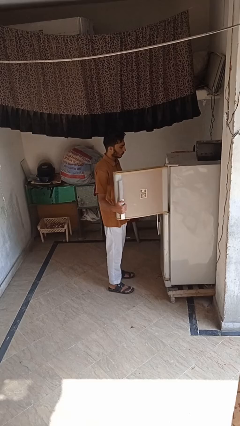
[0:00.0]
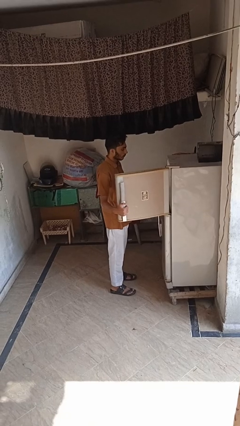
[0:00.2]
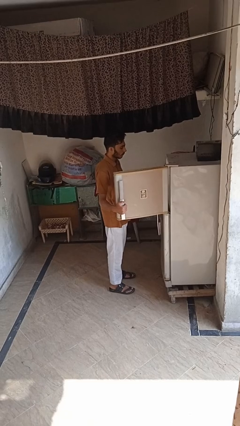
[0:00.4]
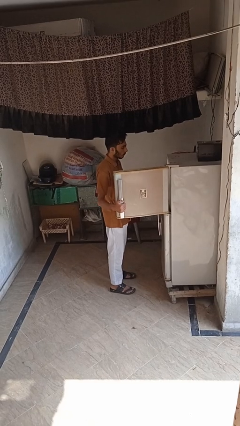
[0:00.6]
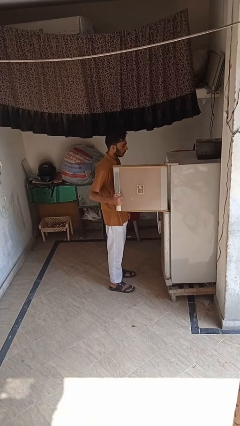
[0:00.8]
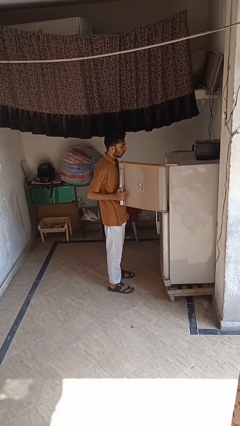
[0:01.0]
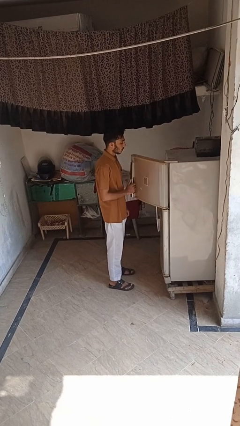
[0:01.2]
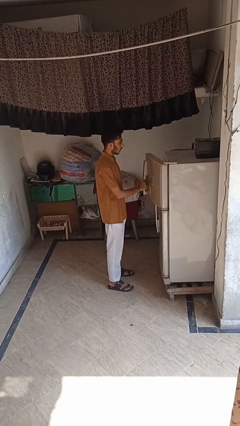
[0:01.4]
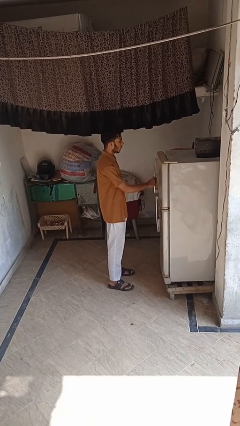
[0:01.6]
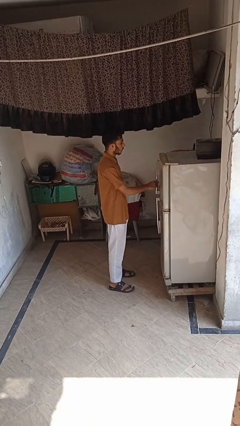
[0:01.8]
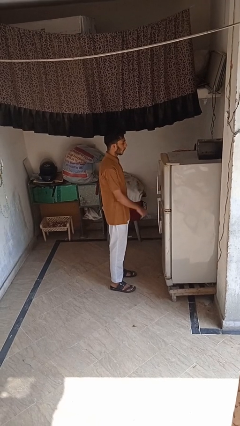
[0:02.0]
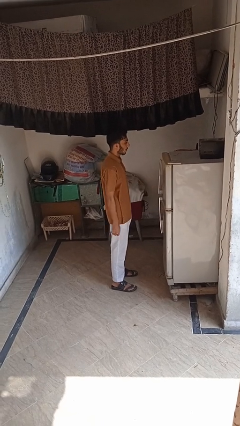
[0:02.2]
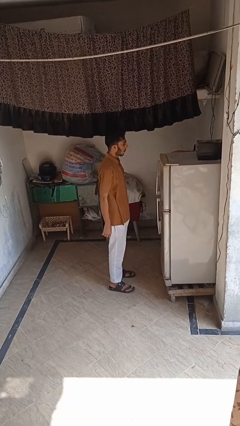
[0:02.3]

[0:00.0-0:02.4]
person closes refrigerator

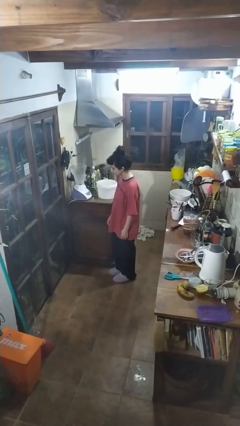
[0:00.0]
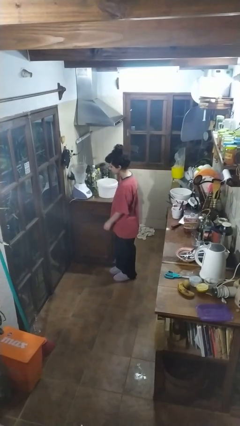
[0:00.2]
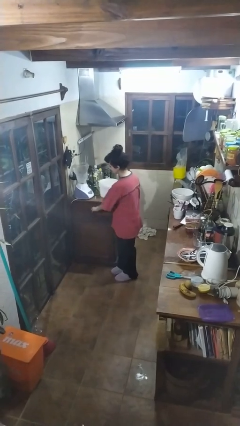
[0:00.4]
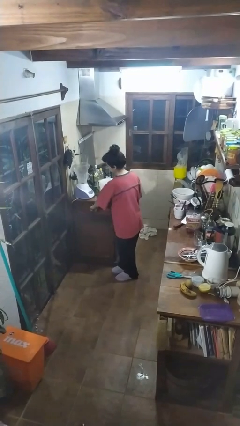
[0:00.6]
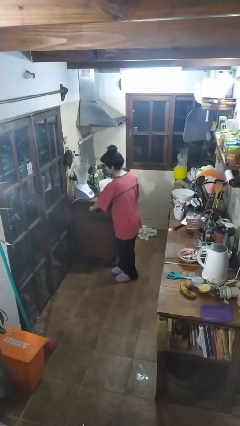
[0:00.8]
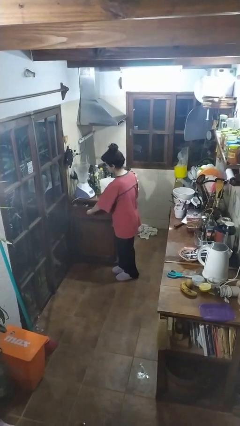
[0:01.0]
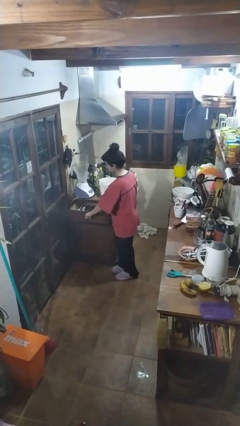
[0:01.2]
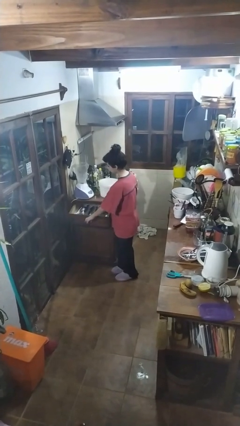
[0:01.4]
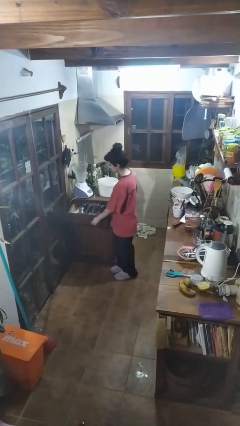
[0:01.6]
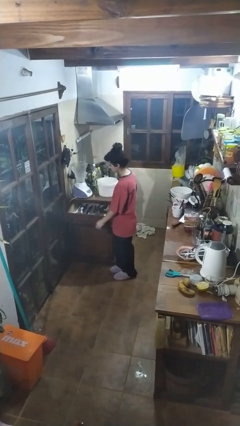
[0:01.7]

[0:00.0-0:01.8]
person opens kitchen drawer

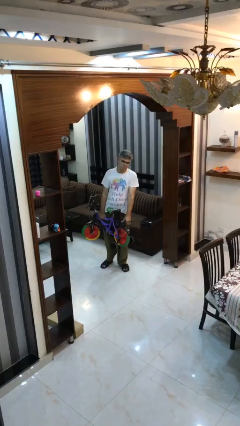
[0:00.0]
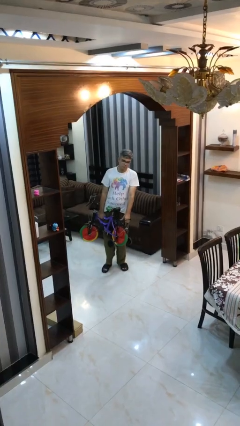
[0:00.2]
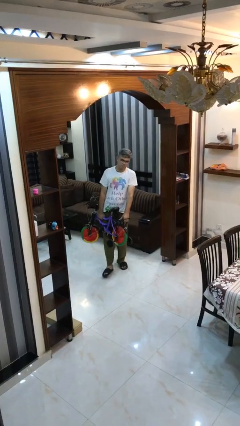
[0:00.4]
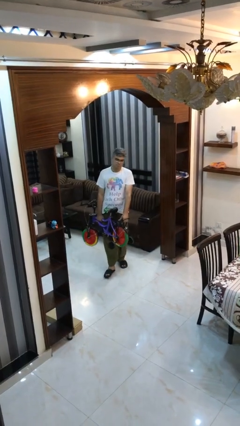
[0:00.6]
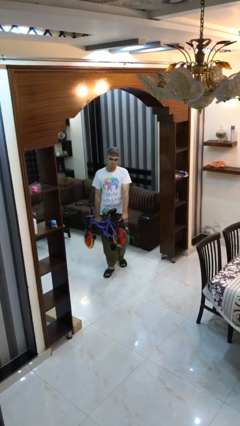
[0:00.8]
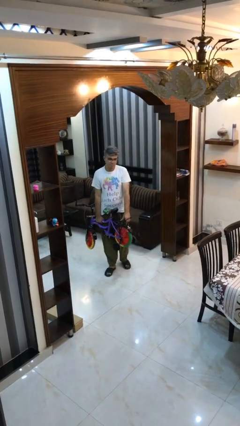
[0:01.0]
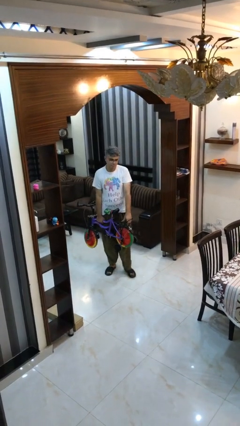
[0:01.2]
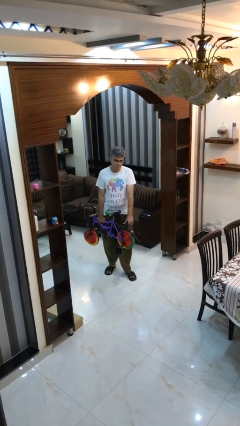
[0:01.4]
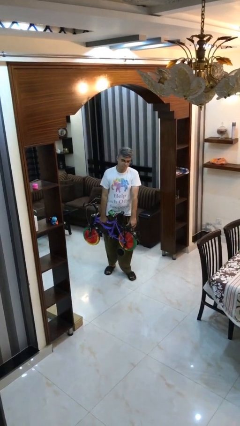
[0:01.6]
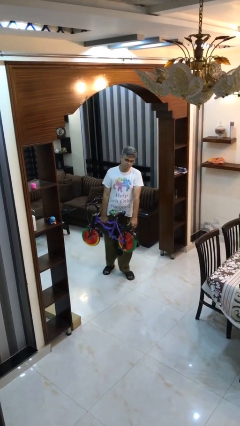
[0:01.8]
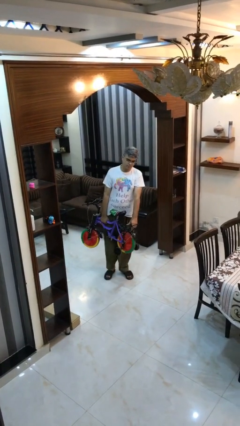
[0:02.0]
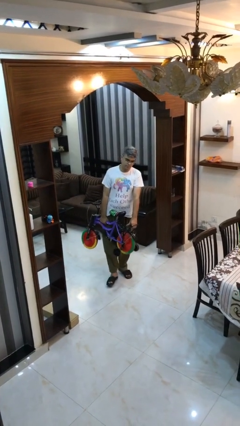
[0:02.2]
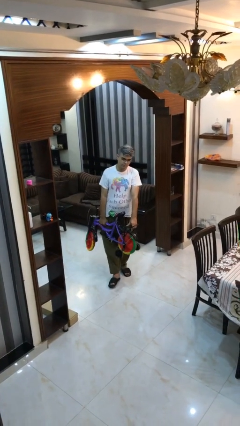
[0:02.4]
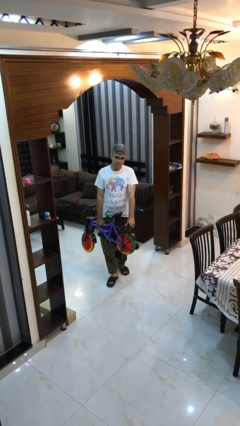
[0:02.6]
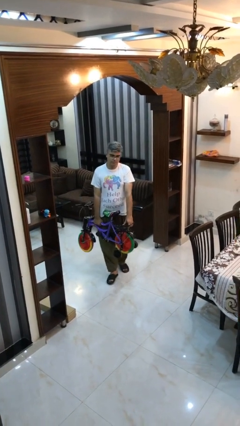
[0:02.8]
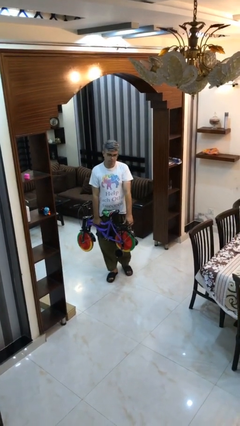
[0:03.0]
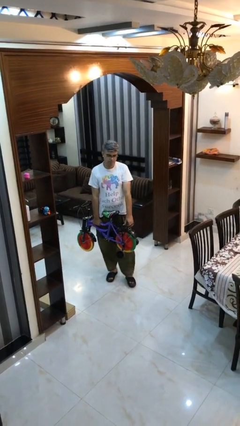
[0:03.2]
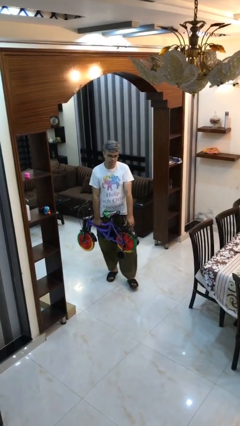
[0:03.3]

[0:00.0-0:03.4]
person carries heavy object

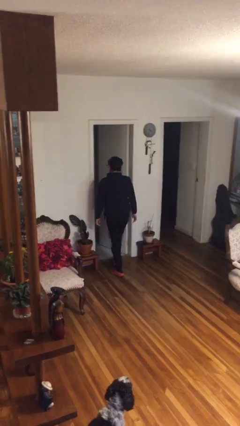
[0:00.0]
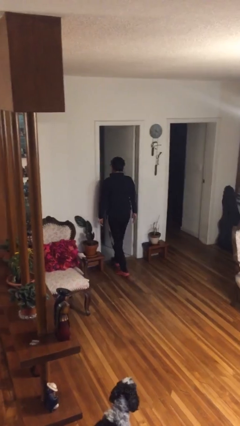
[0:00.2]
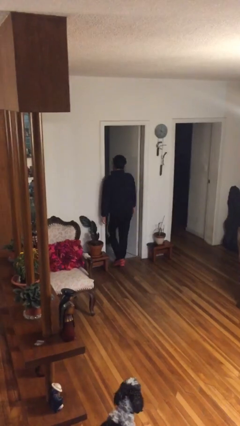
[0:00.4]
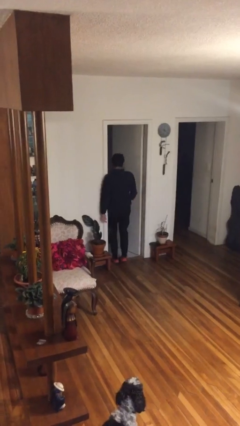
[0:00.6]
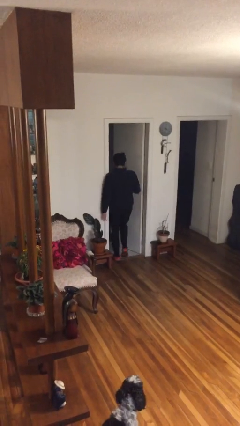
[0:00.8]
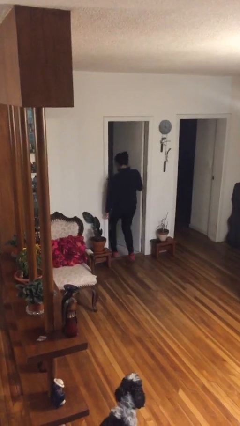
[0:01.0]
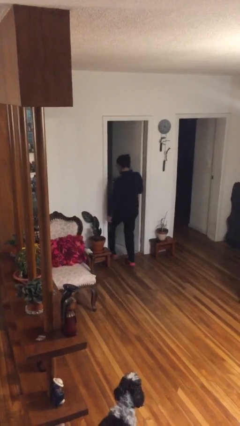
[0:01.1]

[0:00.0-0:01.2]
person bumps into wall

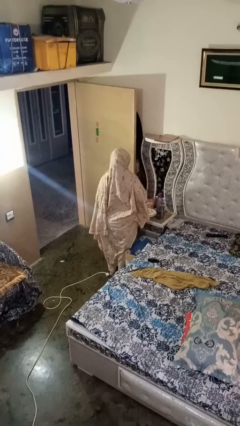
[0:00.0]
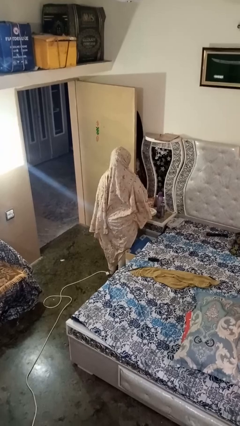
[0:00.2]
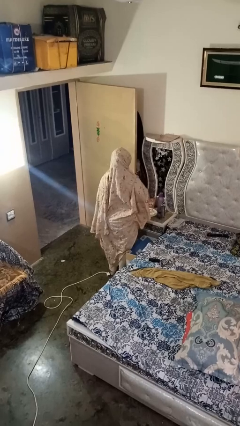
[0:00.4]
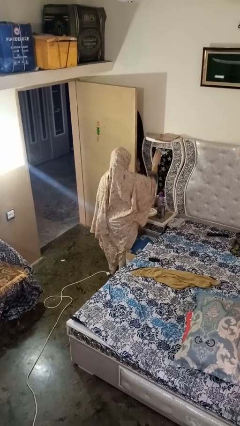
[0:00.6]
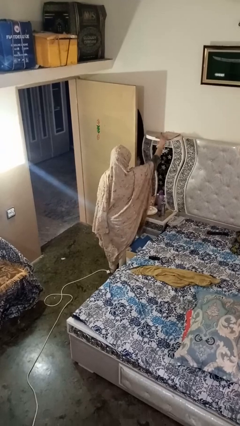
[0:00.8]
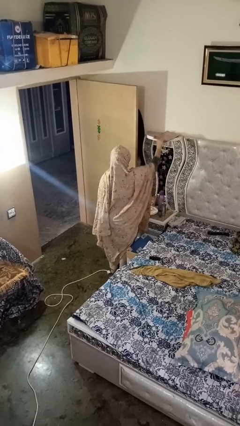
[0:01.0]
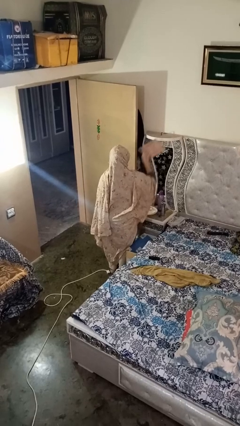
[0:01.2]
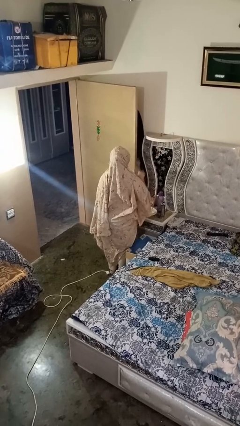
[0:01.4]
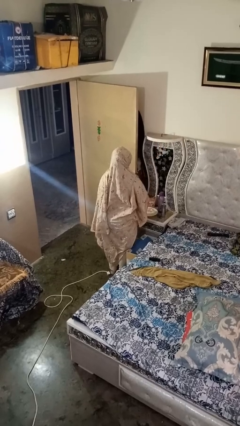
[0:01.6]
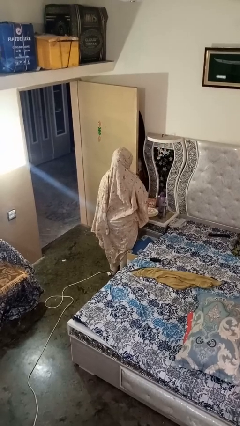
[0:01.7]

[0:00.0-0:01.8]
person picks up object from shelf

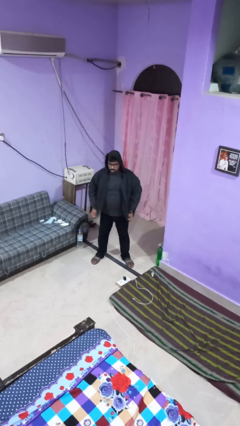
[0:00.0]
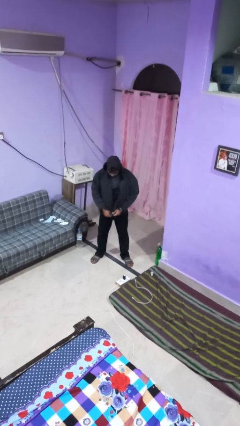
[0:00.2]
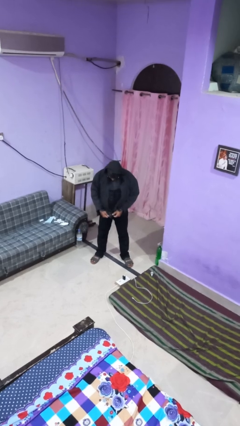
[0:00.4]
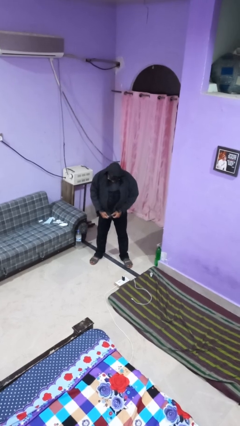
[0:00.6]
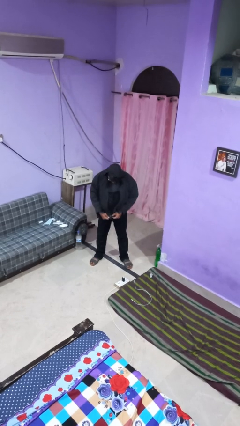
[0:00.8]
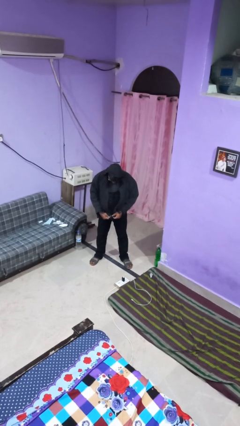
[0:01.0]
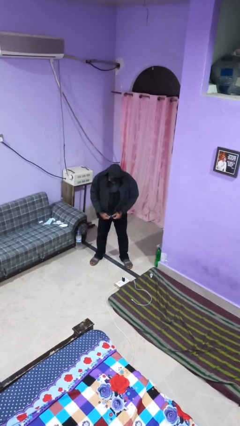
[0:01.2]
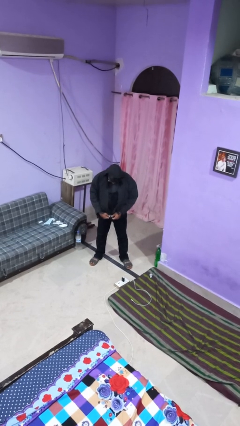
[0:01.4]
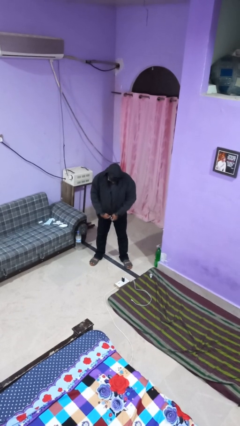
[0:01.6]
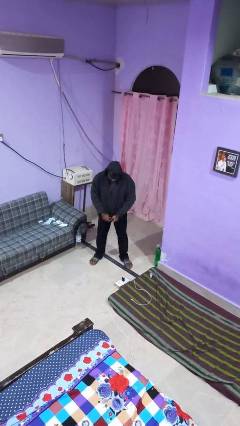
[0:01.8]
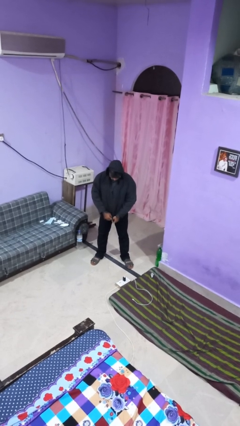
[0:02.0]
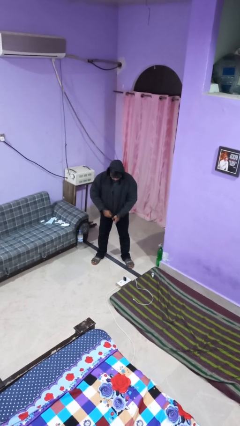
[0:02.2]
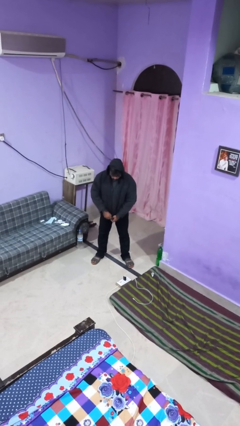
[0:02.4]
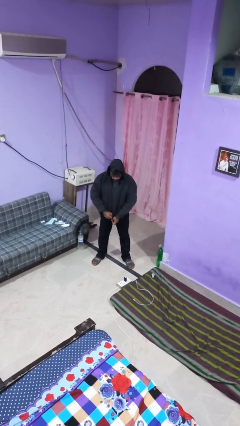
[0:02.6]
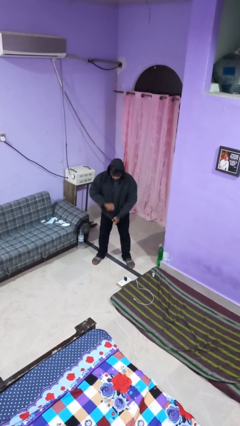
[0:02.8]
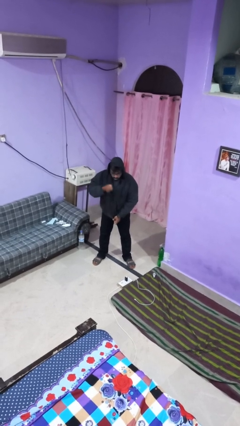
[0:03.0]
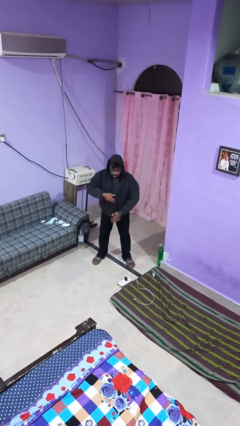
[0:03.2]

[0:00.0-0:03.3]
person zips up jacket

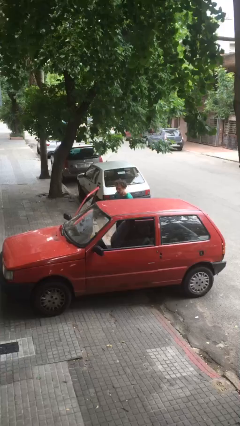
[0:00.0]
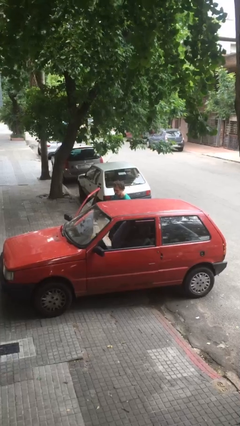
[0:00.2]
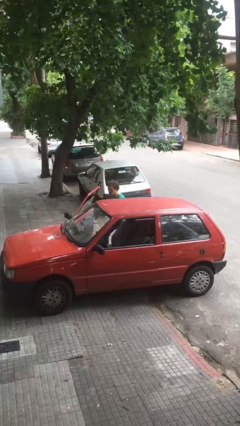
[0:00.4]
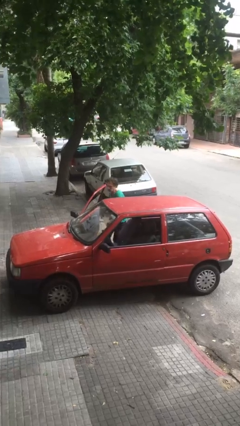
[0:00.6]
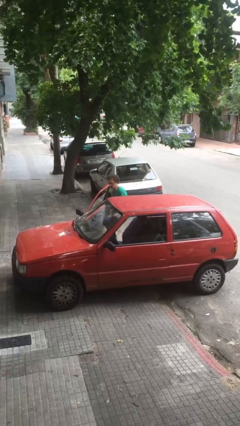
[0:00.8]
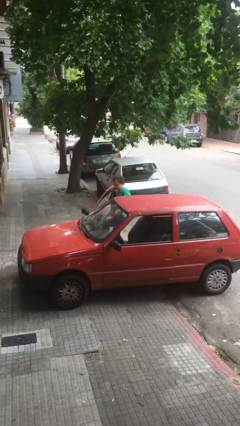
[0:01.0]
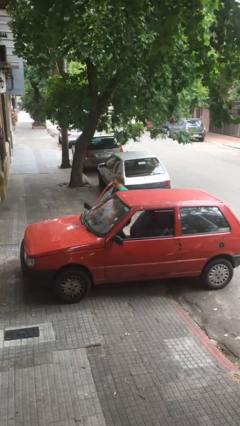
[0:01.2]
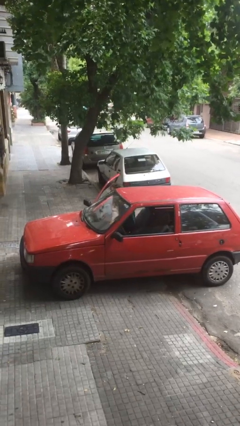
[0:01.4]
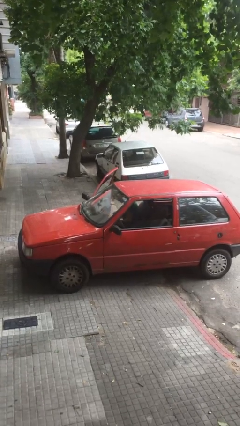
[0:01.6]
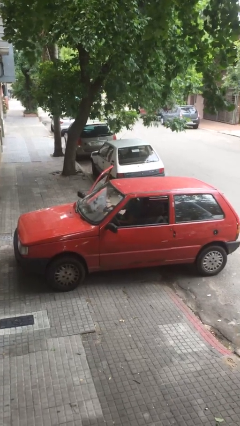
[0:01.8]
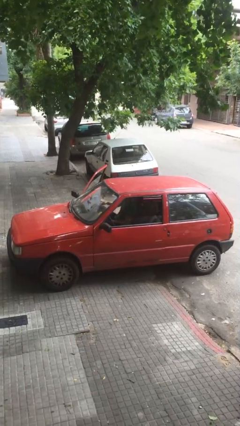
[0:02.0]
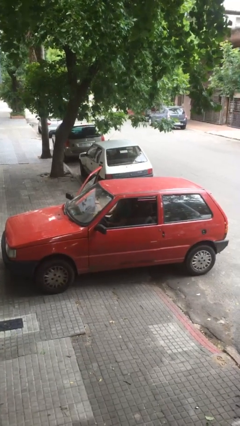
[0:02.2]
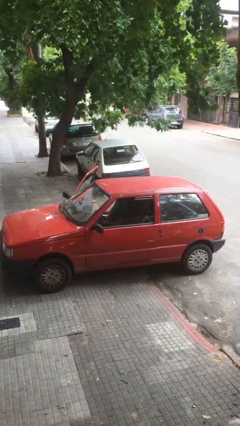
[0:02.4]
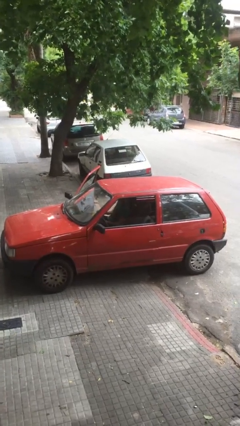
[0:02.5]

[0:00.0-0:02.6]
person enters car

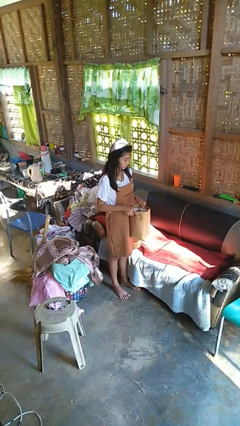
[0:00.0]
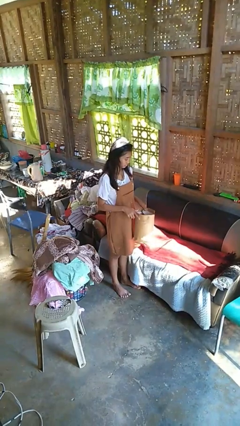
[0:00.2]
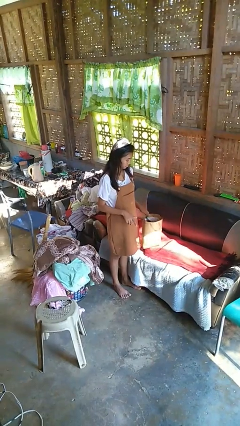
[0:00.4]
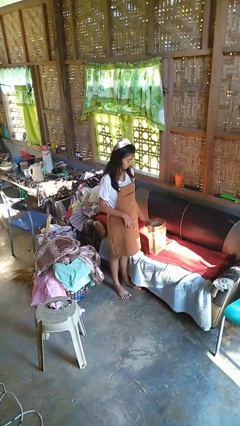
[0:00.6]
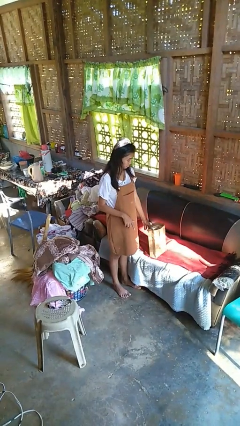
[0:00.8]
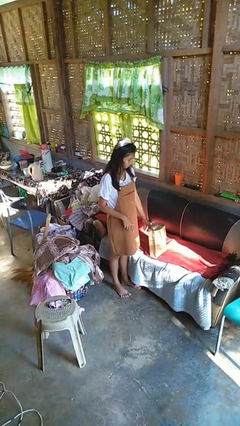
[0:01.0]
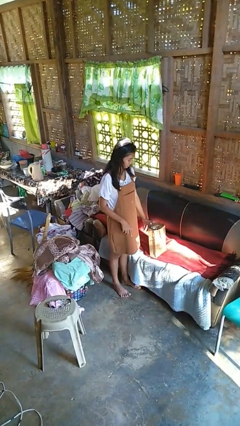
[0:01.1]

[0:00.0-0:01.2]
person puts down object on couch
